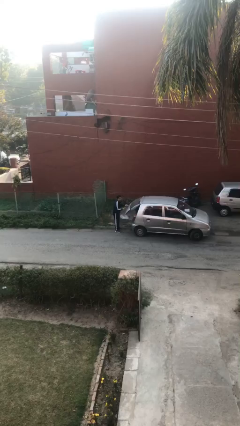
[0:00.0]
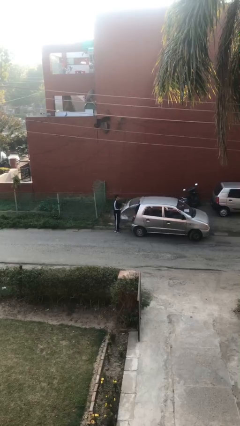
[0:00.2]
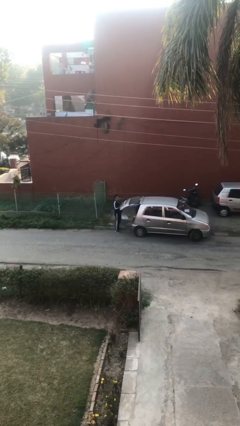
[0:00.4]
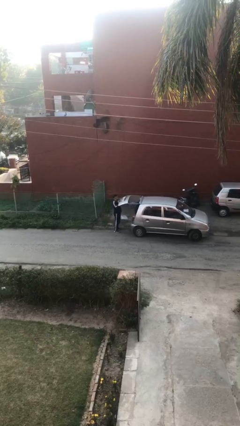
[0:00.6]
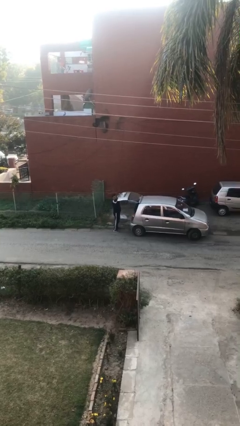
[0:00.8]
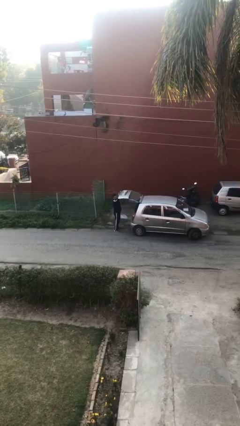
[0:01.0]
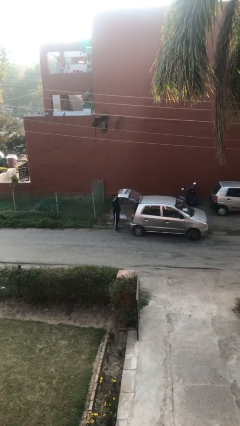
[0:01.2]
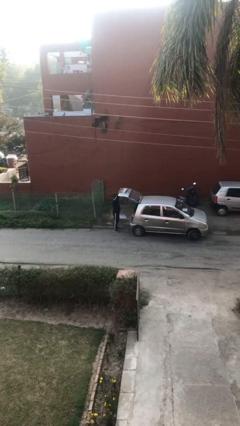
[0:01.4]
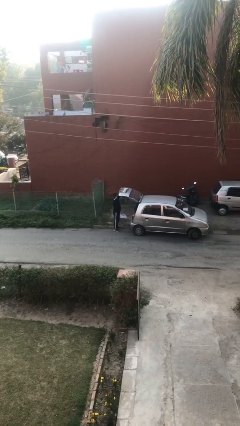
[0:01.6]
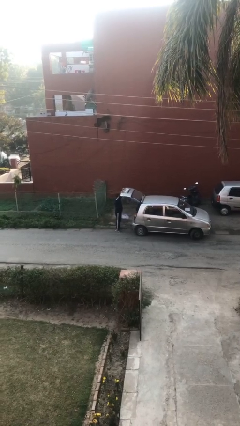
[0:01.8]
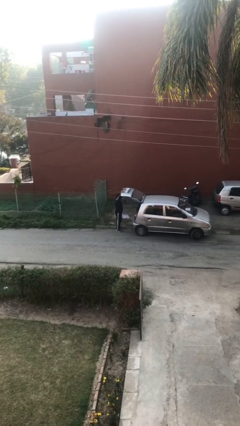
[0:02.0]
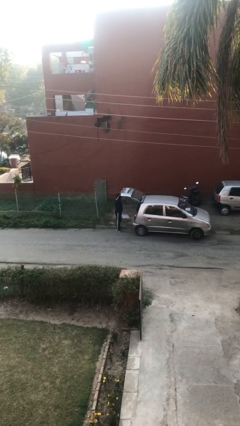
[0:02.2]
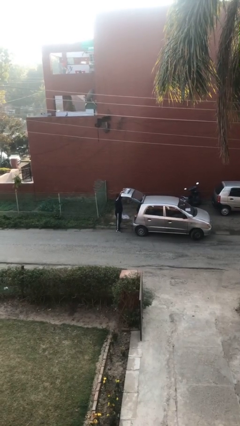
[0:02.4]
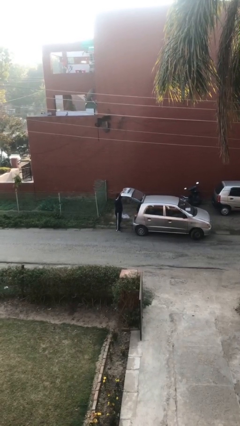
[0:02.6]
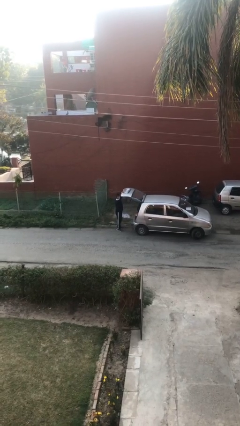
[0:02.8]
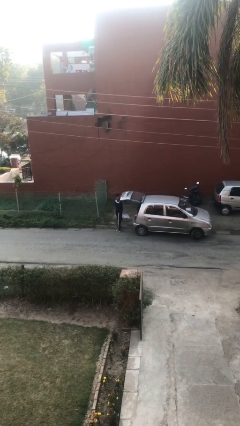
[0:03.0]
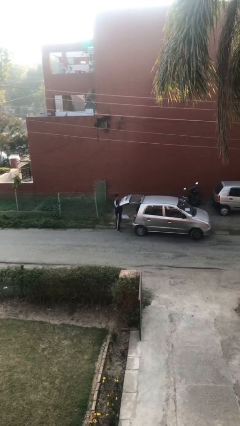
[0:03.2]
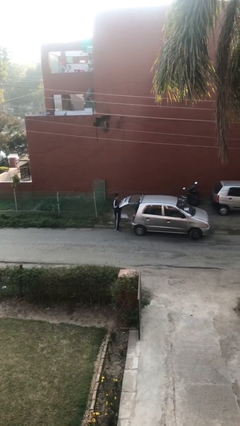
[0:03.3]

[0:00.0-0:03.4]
person opens car trunk

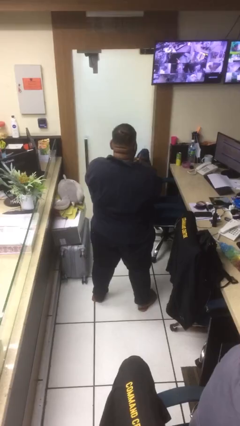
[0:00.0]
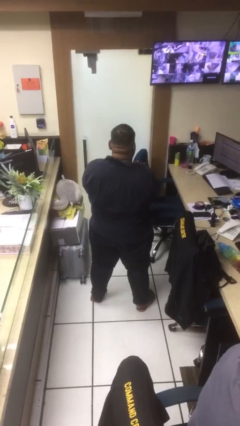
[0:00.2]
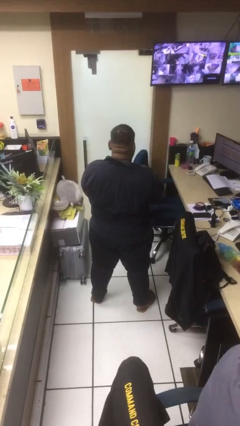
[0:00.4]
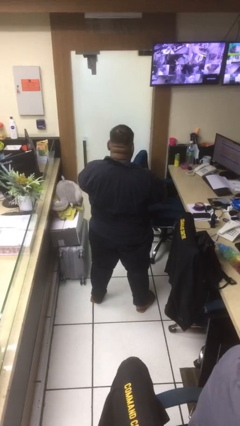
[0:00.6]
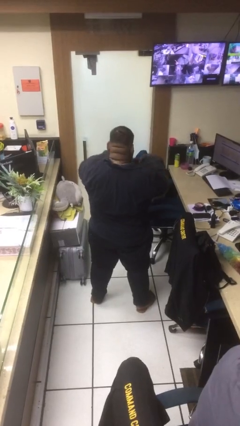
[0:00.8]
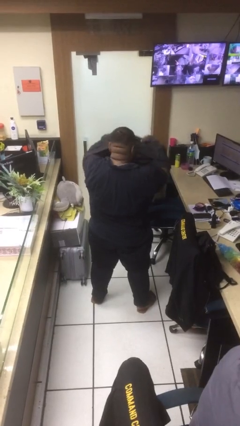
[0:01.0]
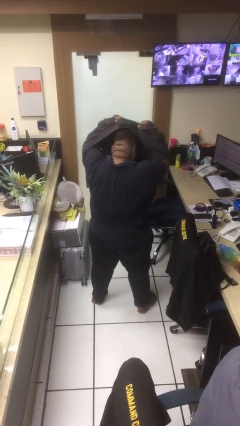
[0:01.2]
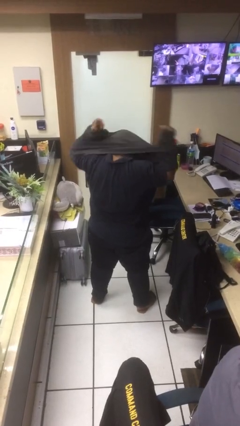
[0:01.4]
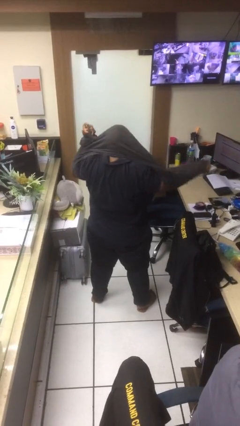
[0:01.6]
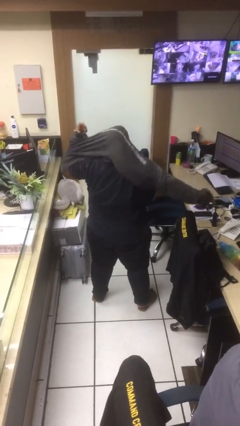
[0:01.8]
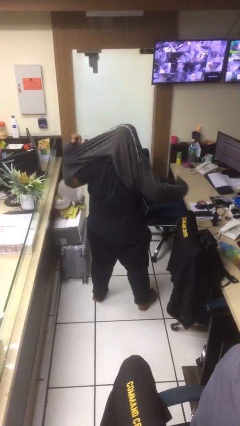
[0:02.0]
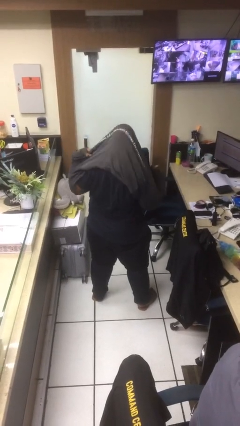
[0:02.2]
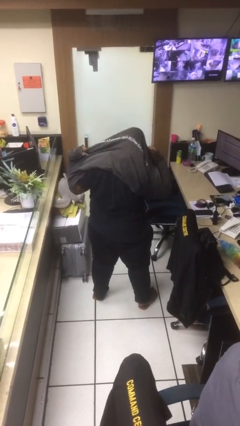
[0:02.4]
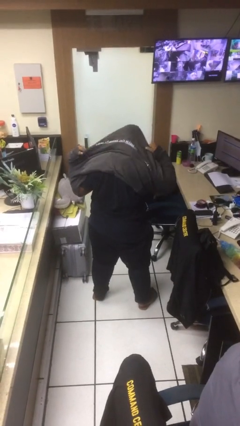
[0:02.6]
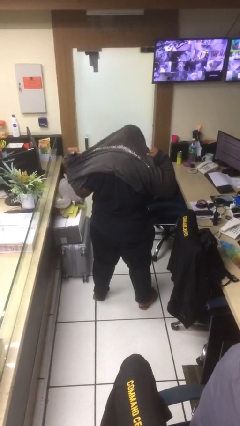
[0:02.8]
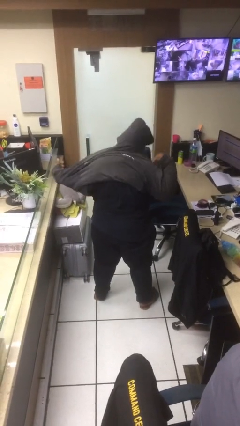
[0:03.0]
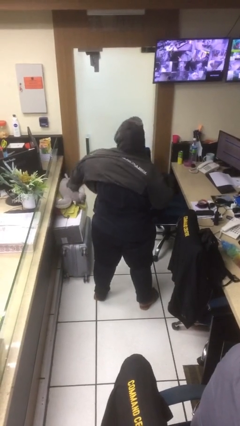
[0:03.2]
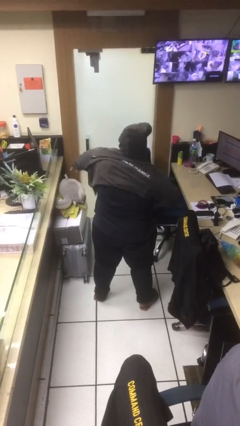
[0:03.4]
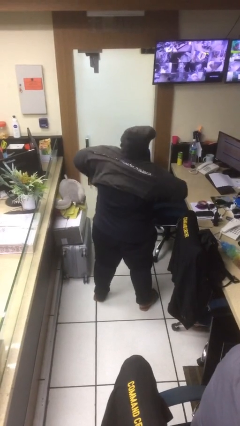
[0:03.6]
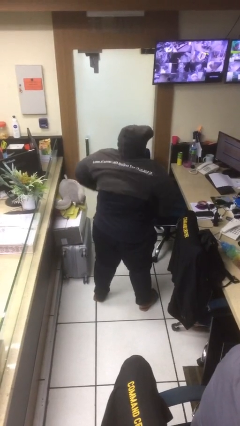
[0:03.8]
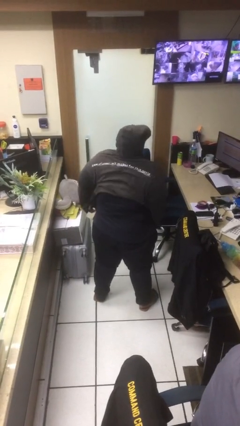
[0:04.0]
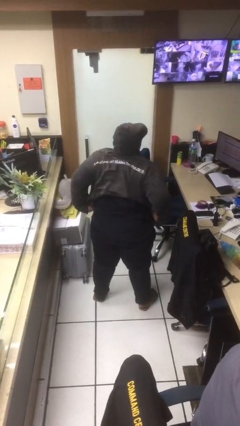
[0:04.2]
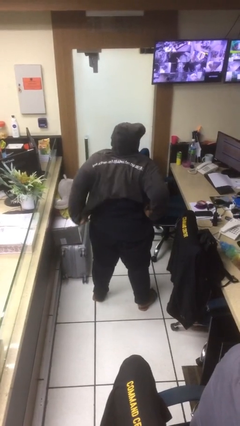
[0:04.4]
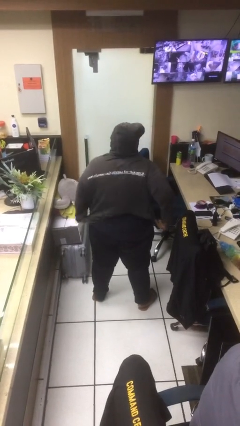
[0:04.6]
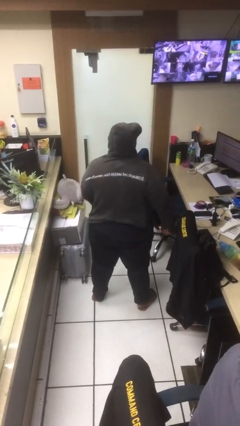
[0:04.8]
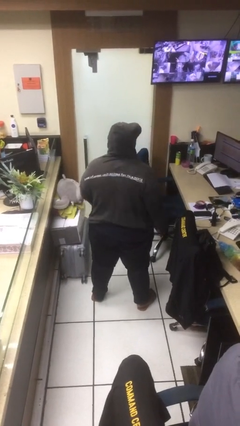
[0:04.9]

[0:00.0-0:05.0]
person puts on hoodie

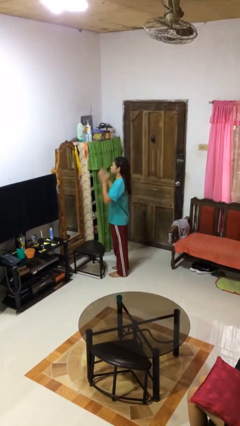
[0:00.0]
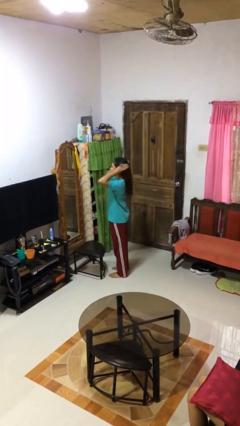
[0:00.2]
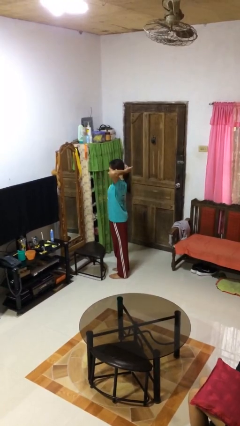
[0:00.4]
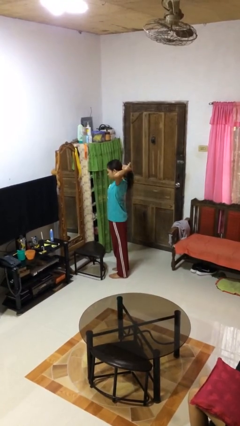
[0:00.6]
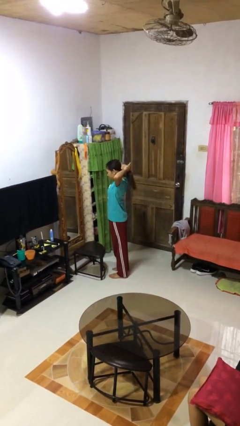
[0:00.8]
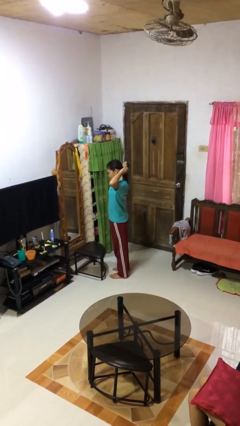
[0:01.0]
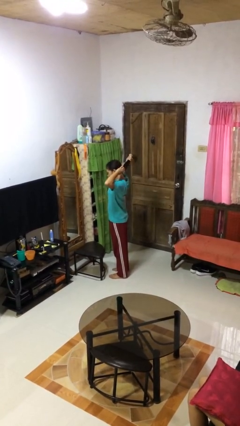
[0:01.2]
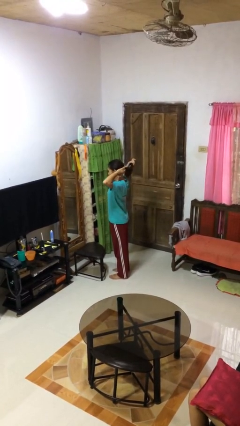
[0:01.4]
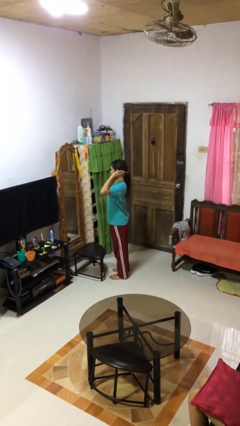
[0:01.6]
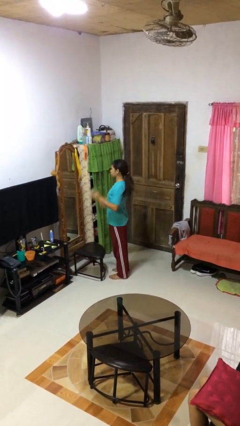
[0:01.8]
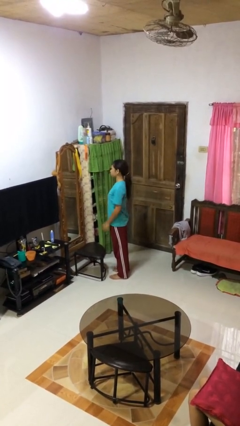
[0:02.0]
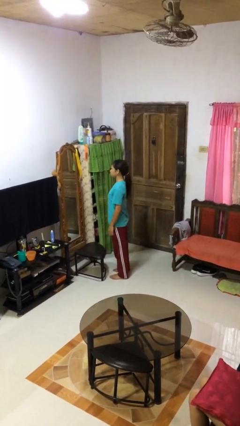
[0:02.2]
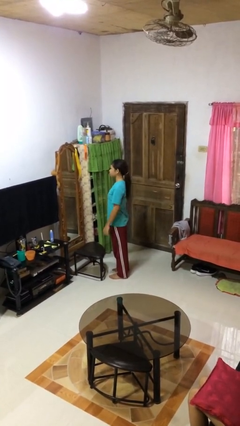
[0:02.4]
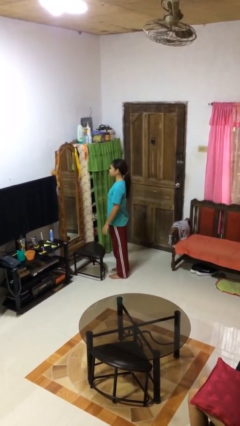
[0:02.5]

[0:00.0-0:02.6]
person puts hair in ponytail

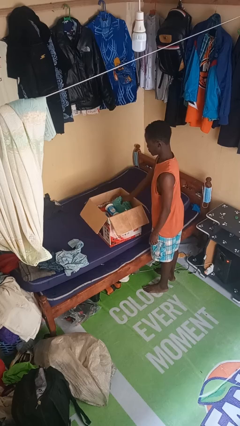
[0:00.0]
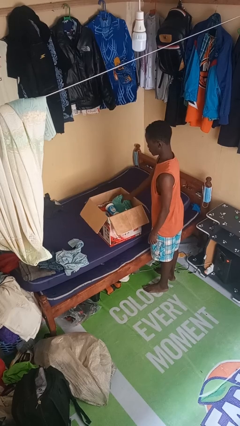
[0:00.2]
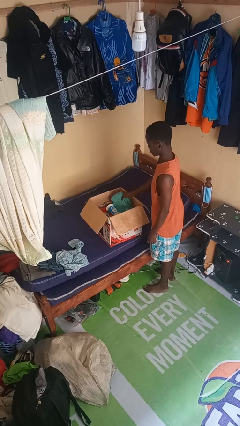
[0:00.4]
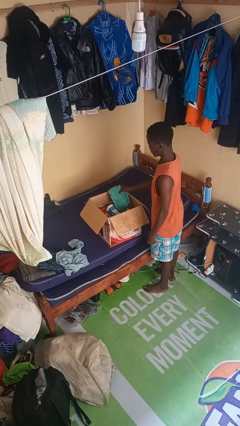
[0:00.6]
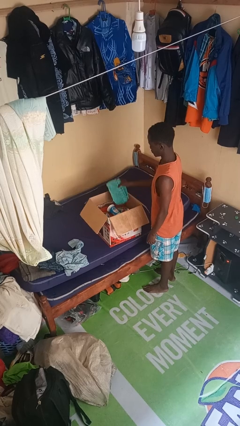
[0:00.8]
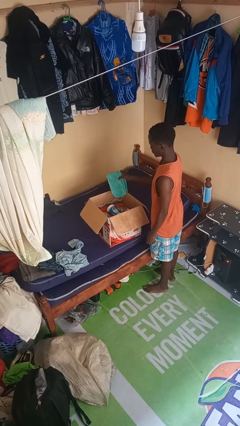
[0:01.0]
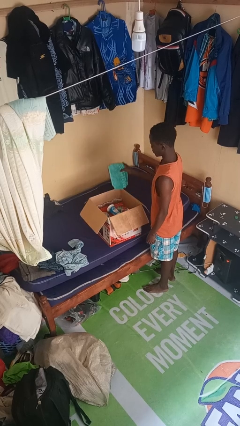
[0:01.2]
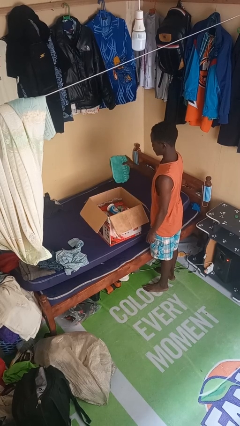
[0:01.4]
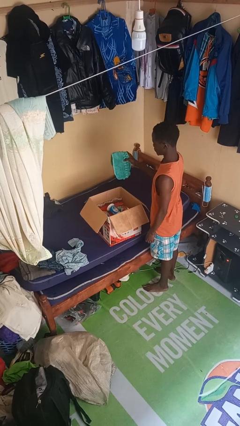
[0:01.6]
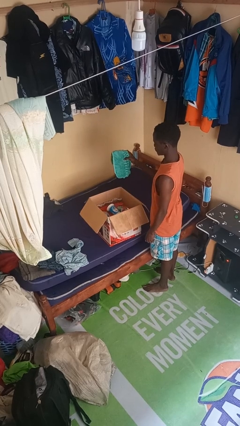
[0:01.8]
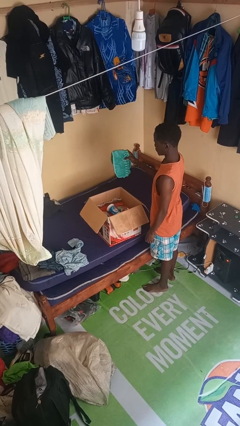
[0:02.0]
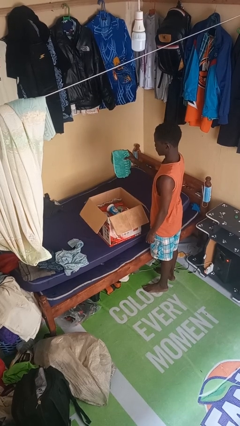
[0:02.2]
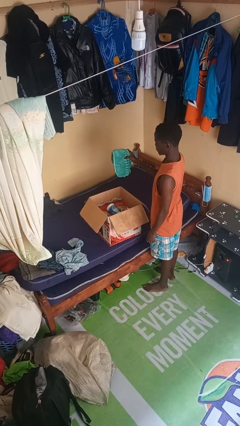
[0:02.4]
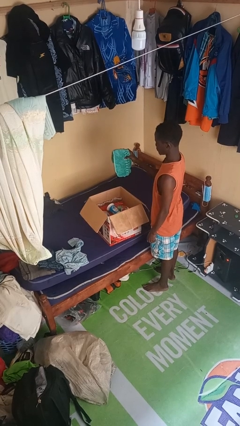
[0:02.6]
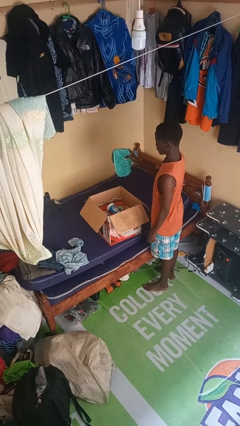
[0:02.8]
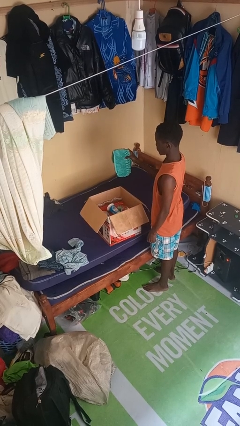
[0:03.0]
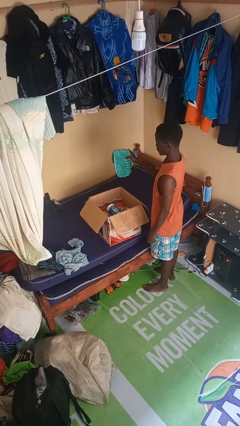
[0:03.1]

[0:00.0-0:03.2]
person takes object from box

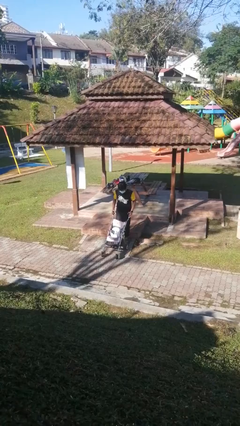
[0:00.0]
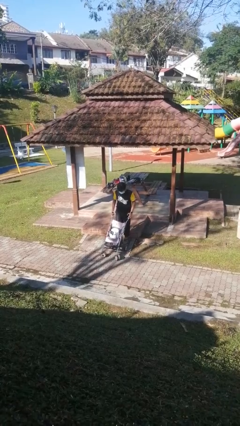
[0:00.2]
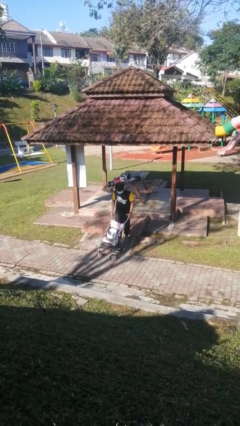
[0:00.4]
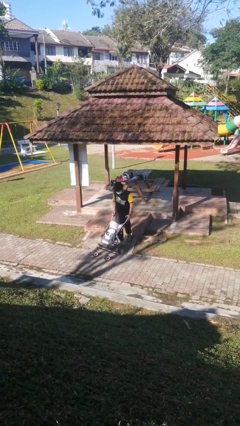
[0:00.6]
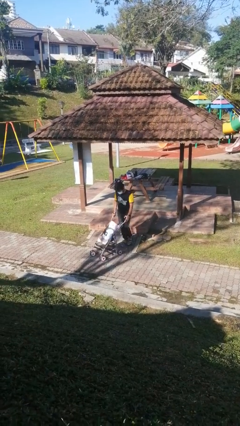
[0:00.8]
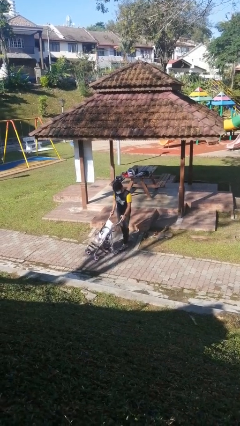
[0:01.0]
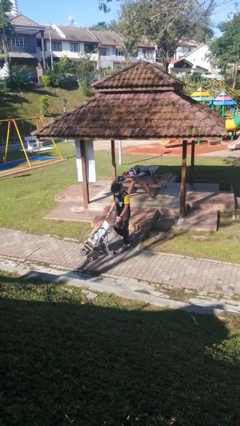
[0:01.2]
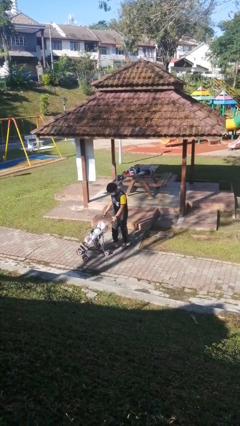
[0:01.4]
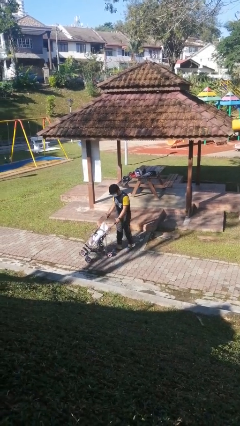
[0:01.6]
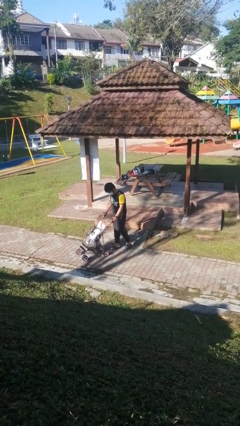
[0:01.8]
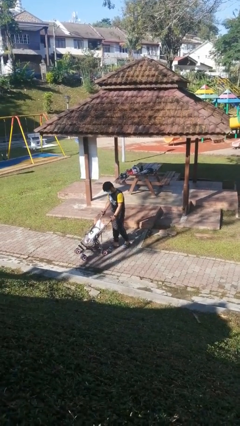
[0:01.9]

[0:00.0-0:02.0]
person pushes wheeled cart

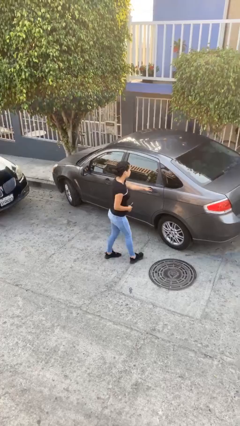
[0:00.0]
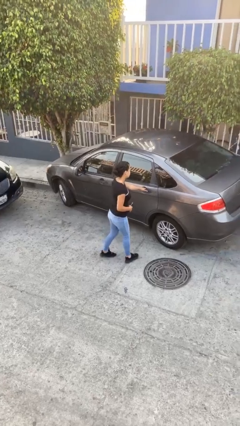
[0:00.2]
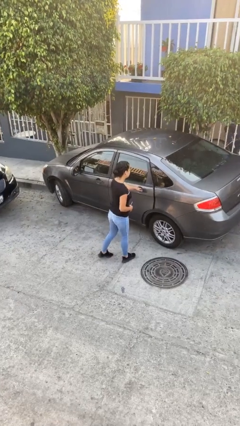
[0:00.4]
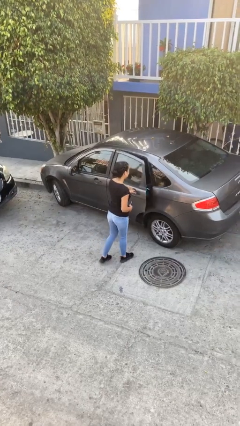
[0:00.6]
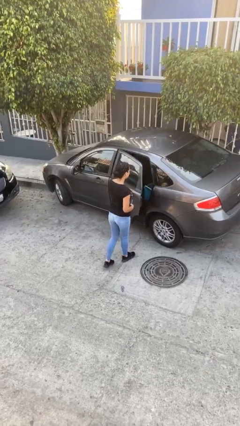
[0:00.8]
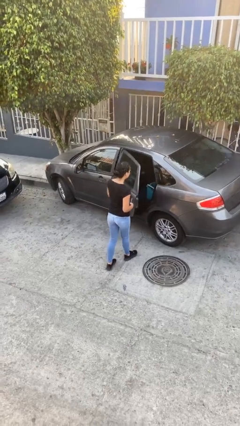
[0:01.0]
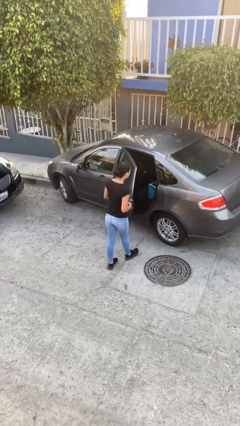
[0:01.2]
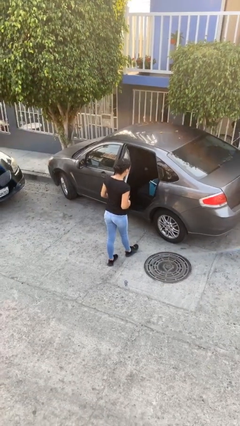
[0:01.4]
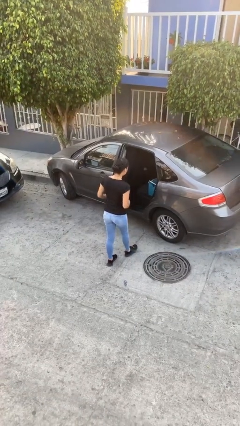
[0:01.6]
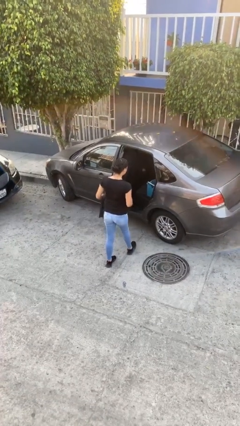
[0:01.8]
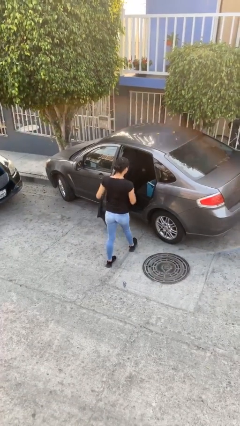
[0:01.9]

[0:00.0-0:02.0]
person opens car door
